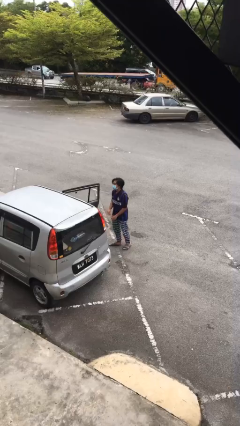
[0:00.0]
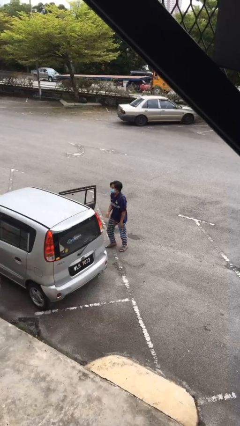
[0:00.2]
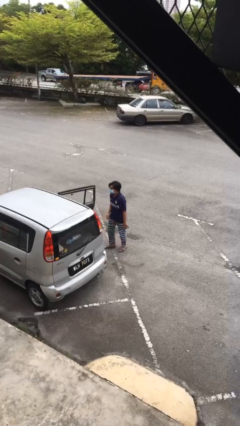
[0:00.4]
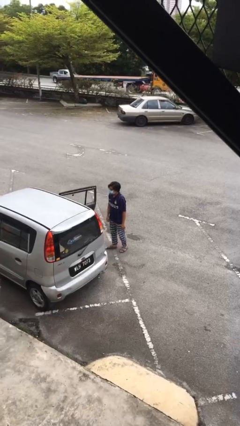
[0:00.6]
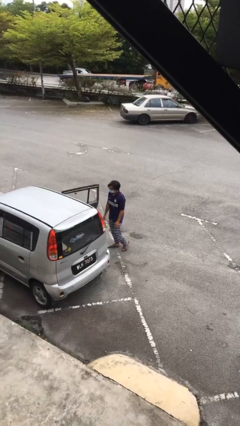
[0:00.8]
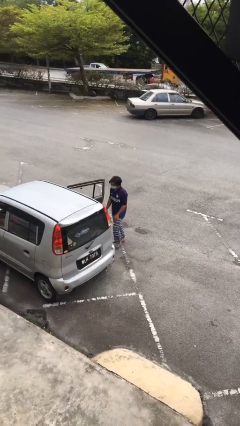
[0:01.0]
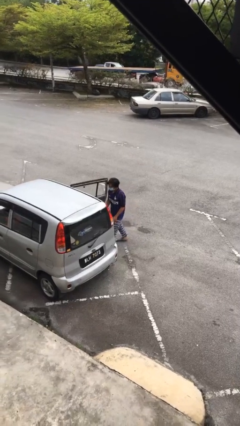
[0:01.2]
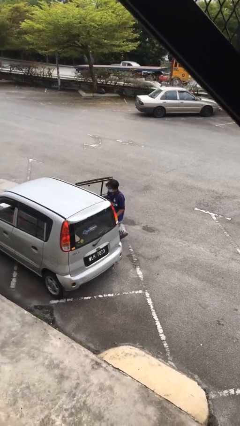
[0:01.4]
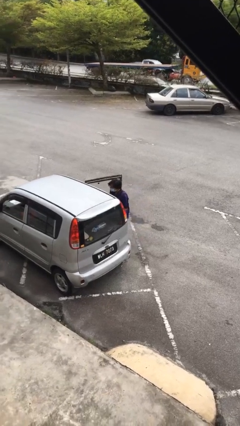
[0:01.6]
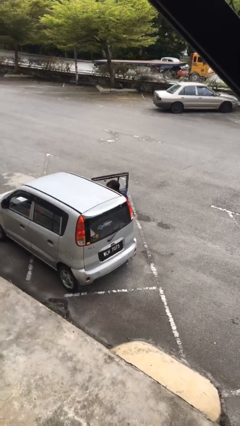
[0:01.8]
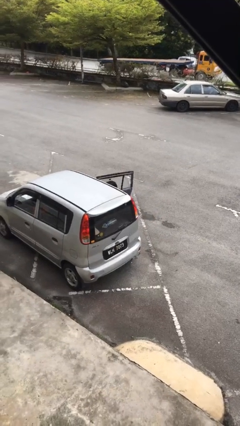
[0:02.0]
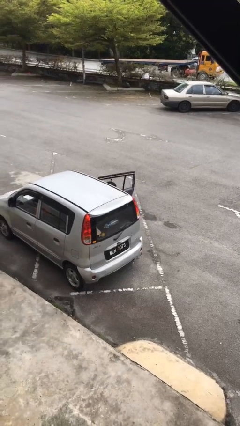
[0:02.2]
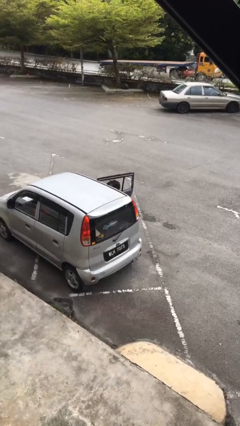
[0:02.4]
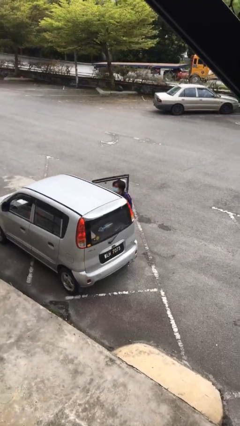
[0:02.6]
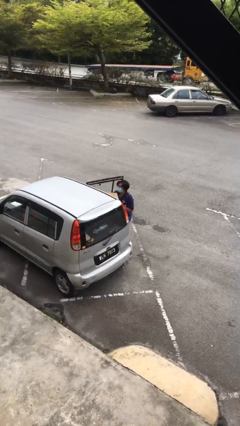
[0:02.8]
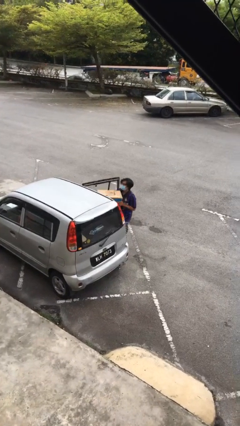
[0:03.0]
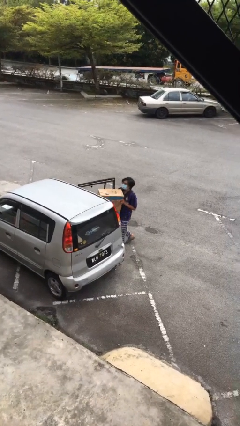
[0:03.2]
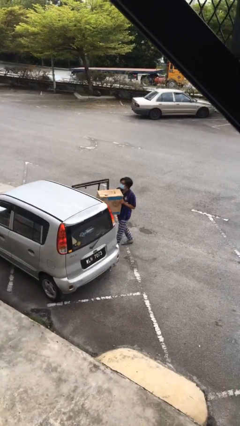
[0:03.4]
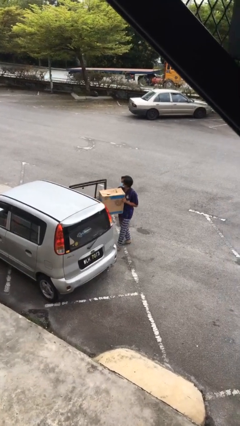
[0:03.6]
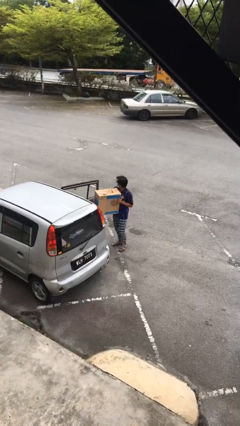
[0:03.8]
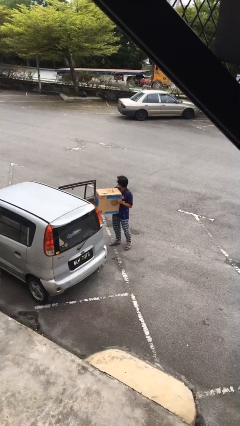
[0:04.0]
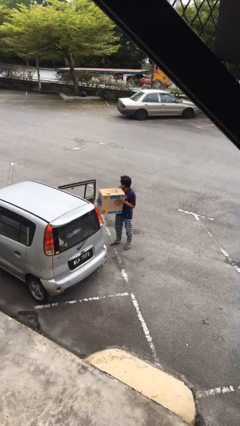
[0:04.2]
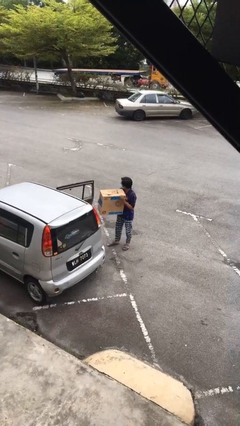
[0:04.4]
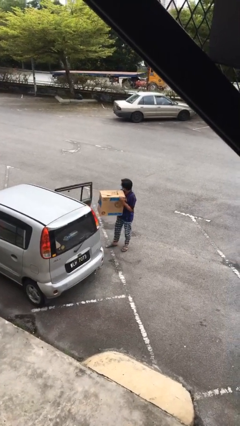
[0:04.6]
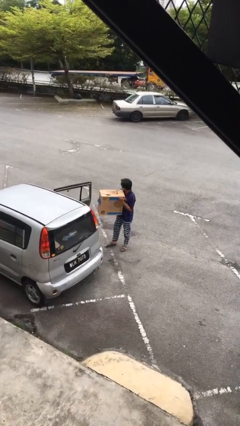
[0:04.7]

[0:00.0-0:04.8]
person unloads car

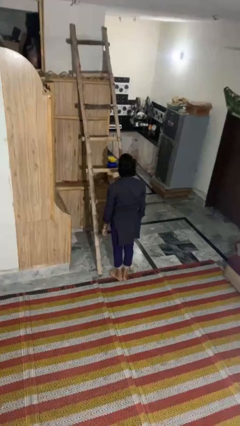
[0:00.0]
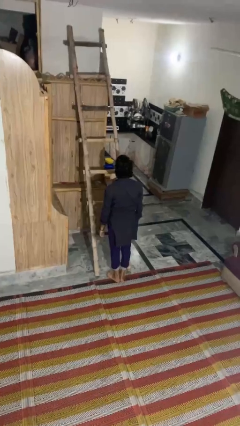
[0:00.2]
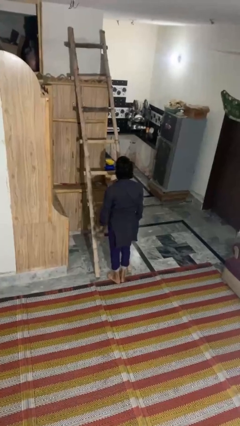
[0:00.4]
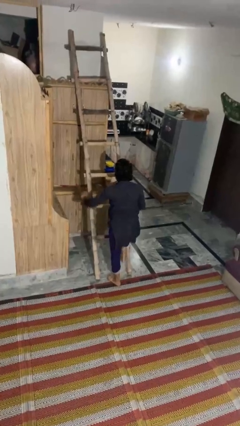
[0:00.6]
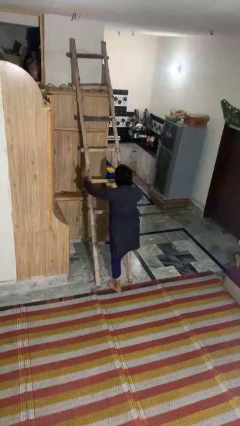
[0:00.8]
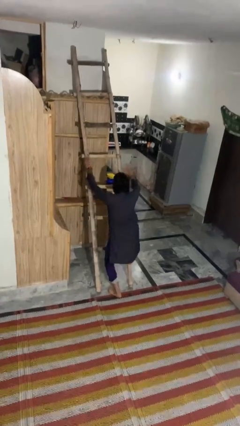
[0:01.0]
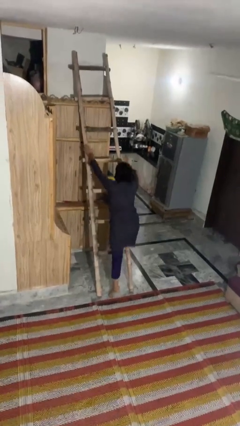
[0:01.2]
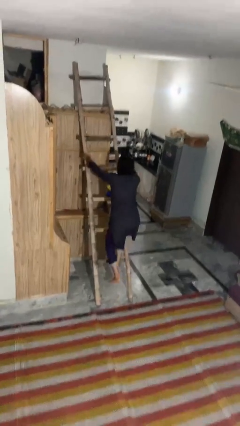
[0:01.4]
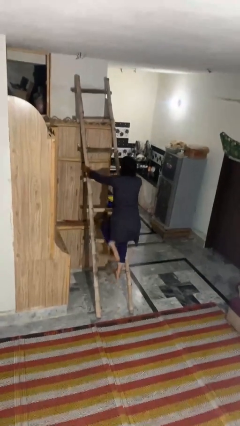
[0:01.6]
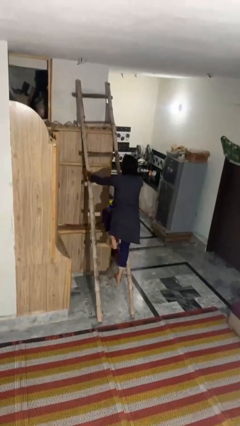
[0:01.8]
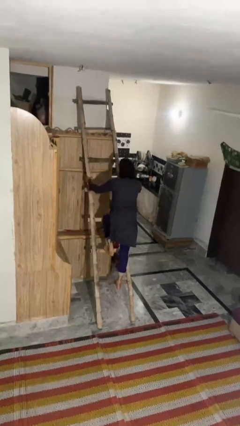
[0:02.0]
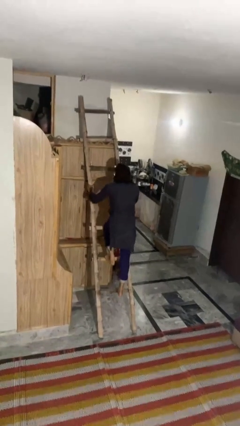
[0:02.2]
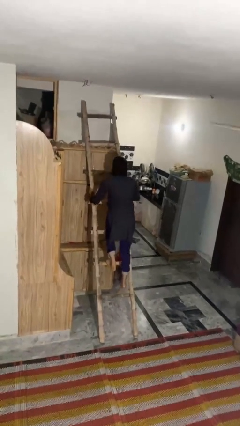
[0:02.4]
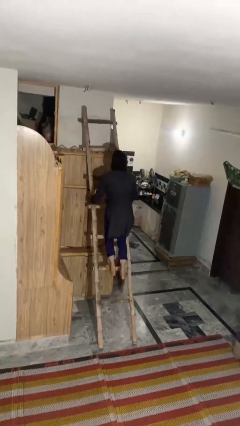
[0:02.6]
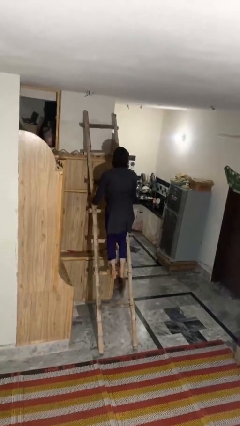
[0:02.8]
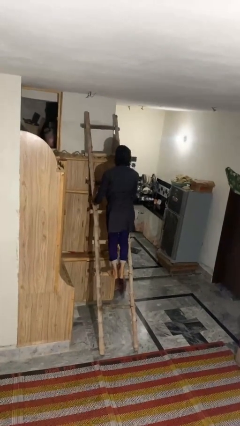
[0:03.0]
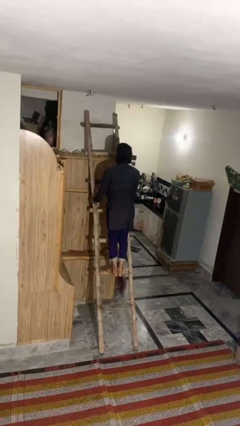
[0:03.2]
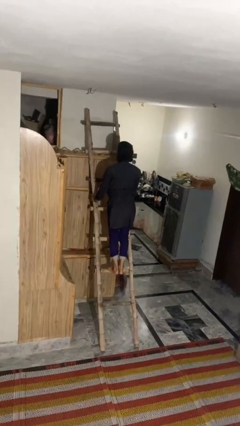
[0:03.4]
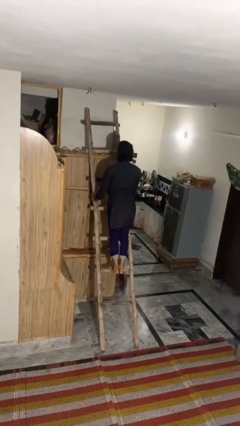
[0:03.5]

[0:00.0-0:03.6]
person climbs up ladder

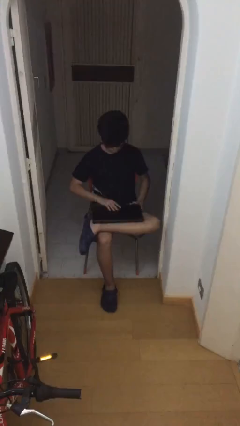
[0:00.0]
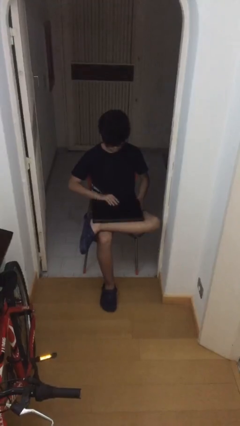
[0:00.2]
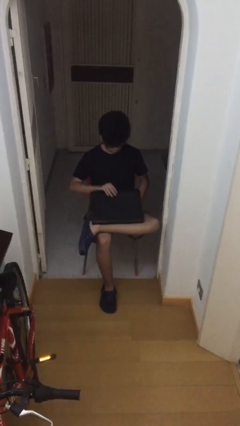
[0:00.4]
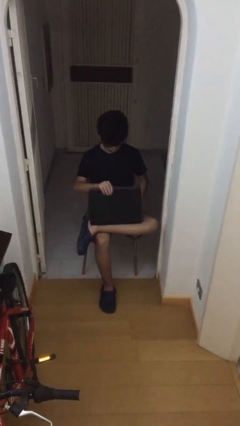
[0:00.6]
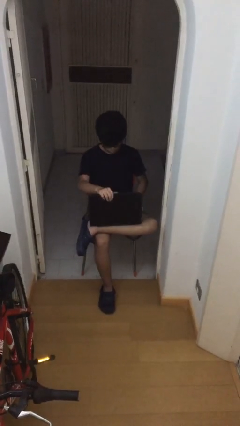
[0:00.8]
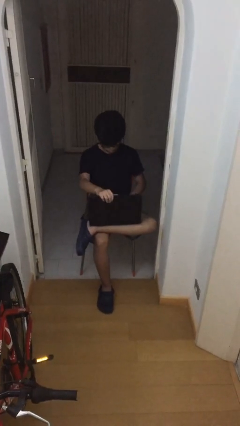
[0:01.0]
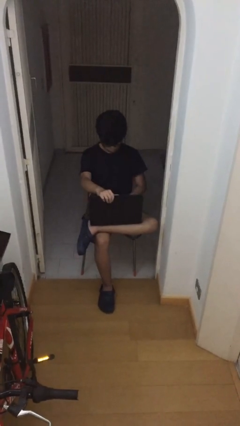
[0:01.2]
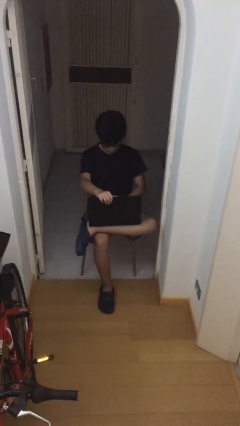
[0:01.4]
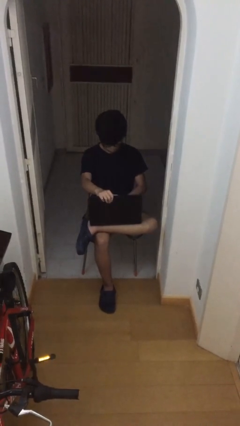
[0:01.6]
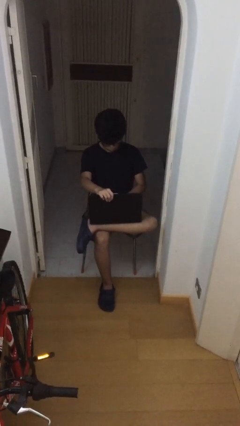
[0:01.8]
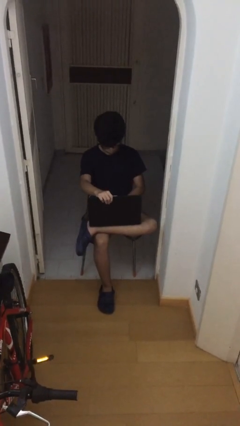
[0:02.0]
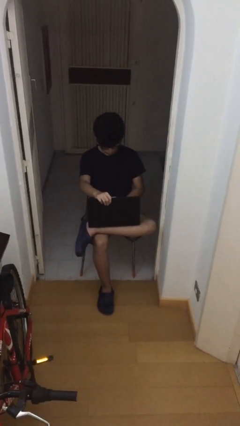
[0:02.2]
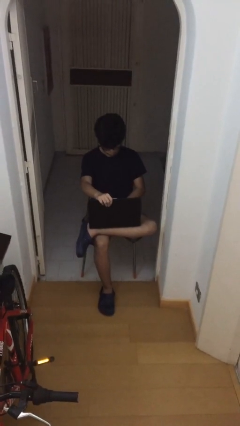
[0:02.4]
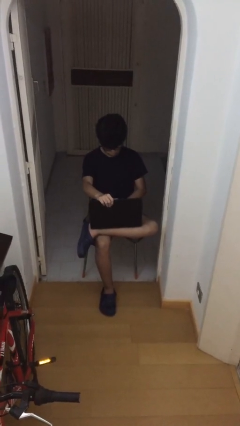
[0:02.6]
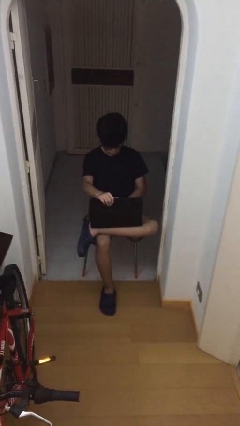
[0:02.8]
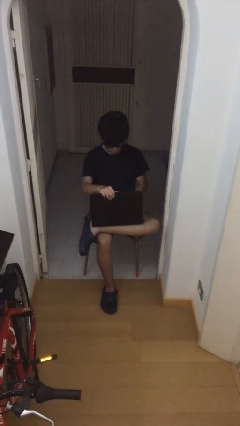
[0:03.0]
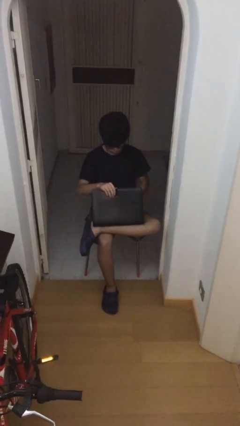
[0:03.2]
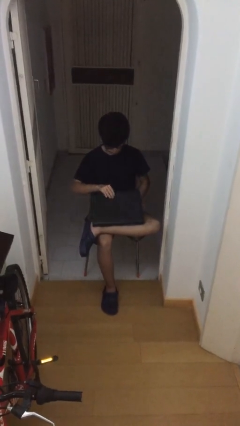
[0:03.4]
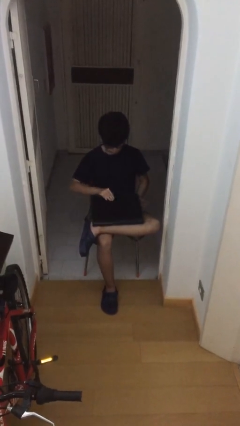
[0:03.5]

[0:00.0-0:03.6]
person interacts with laptop

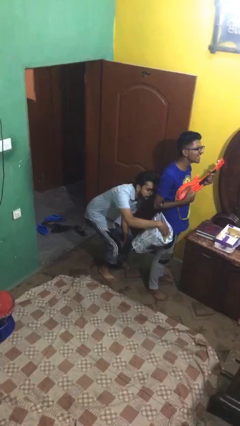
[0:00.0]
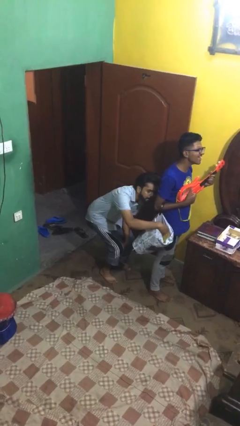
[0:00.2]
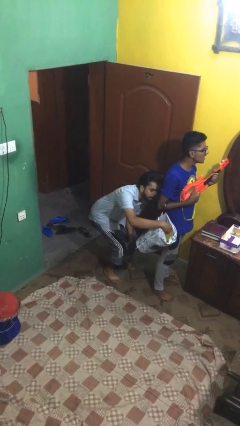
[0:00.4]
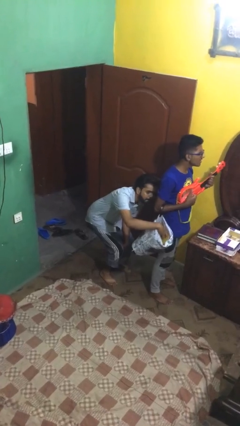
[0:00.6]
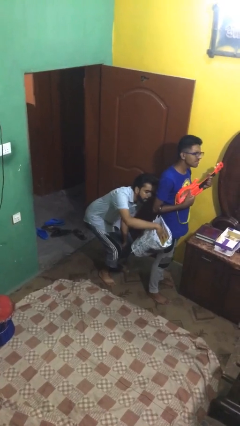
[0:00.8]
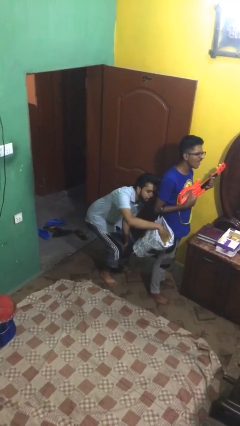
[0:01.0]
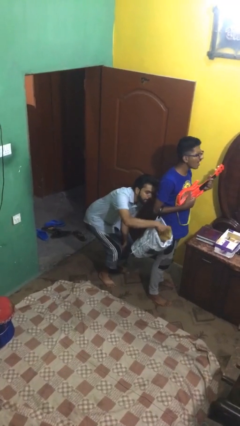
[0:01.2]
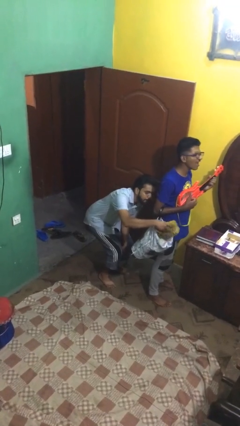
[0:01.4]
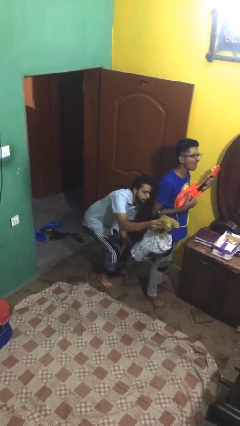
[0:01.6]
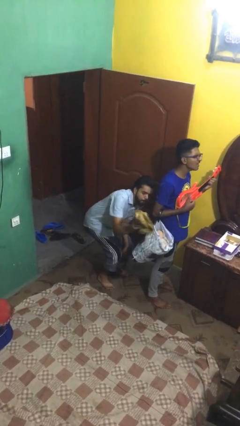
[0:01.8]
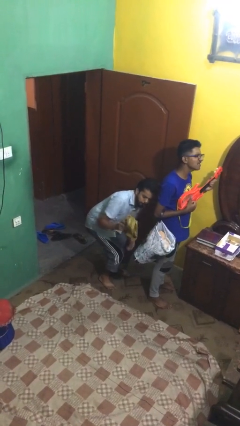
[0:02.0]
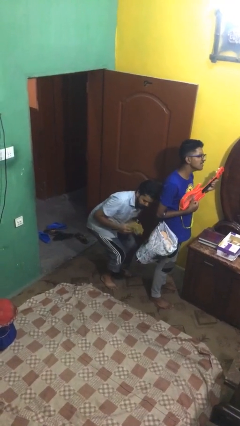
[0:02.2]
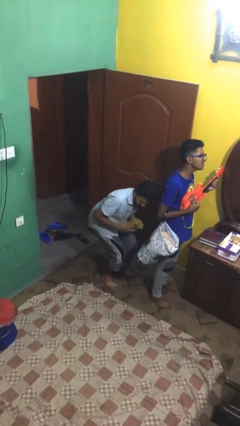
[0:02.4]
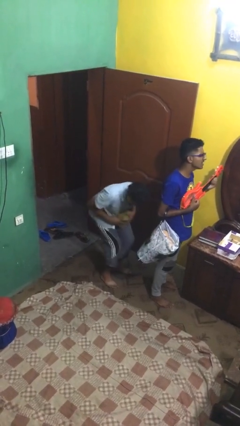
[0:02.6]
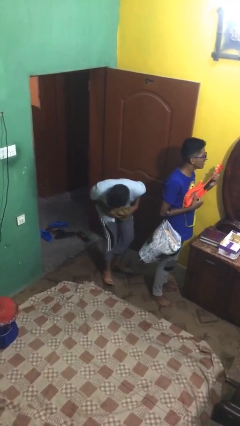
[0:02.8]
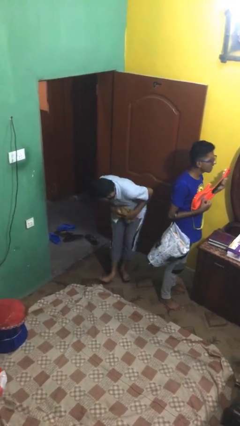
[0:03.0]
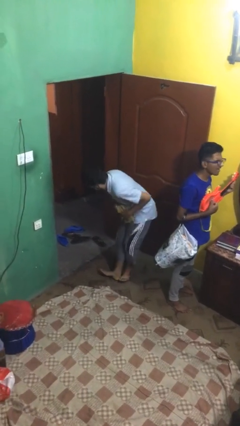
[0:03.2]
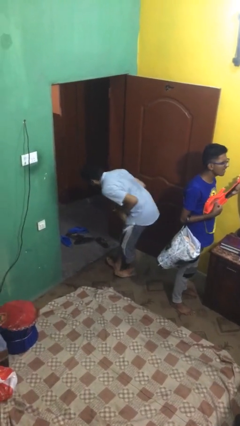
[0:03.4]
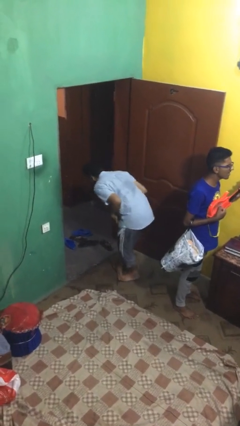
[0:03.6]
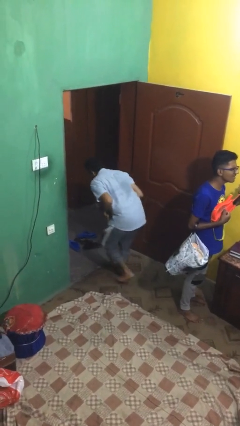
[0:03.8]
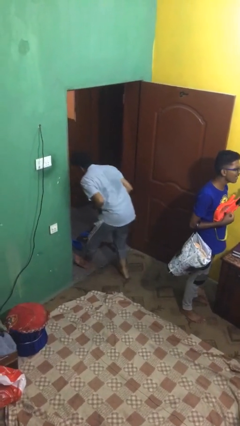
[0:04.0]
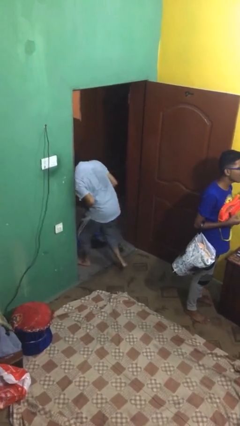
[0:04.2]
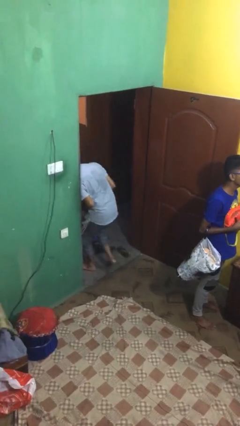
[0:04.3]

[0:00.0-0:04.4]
person steals object from person

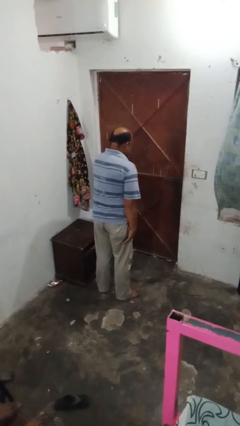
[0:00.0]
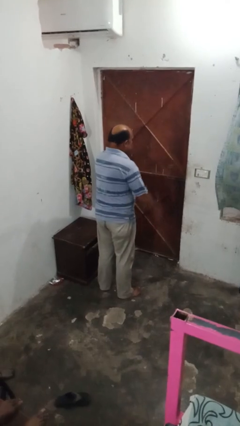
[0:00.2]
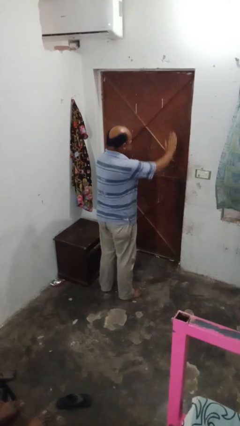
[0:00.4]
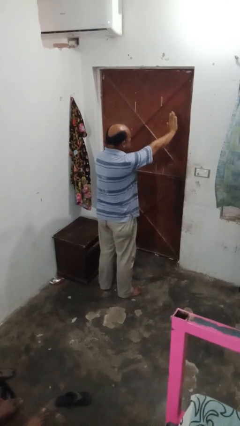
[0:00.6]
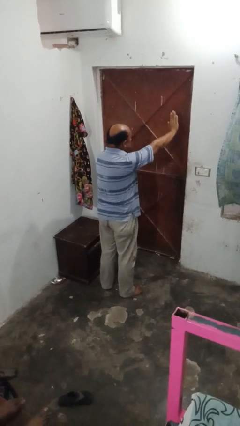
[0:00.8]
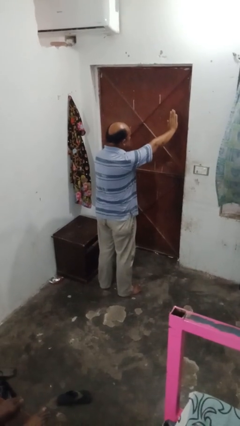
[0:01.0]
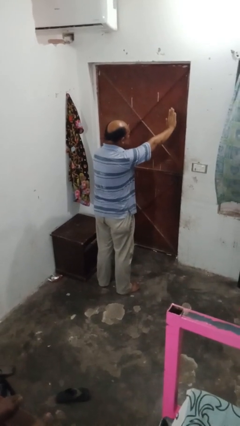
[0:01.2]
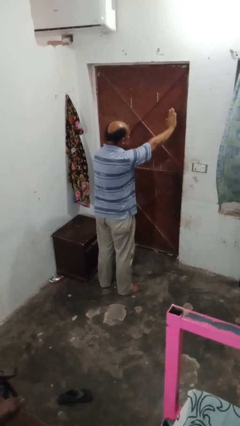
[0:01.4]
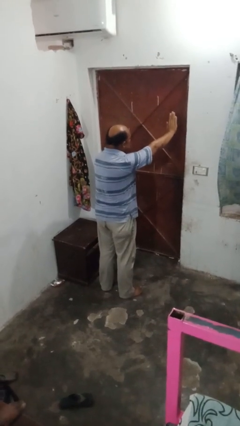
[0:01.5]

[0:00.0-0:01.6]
person gestures stop
